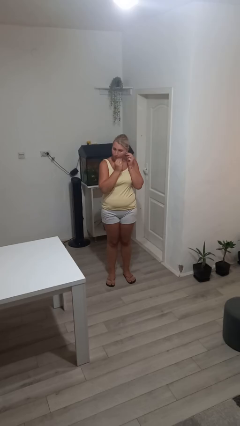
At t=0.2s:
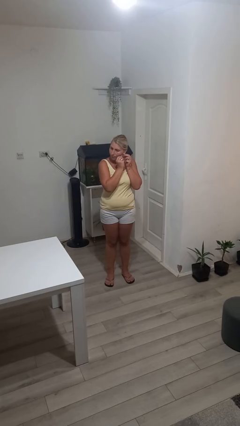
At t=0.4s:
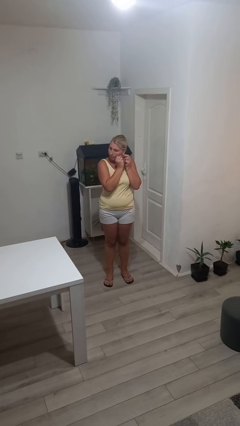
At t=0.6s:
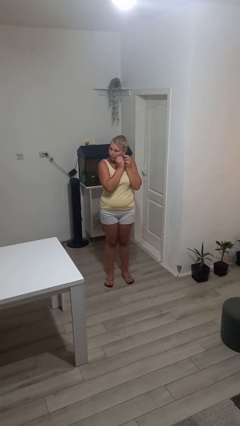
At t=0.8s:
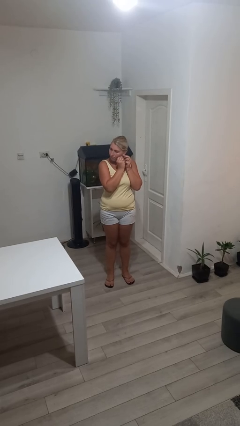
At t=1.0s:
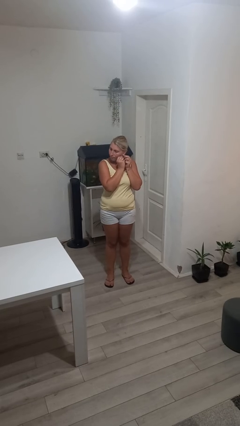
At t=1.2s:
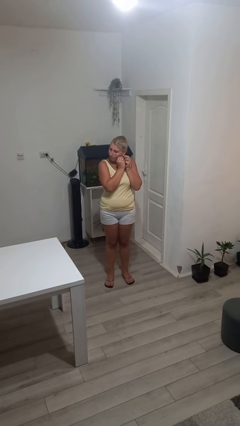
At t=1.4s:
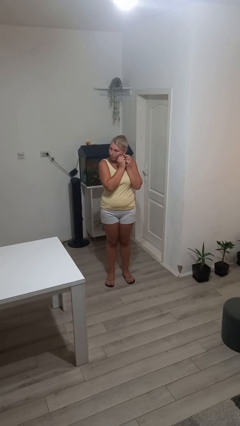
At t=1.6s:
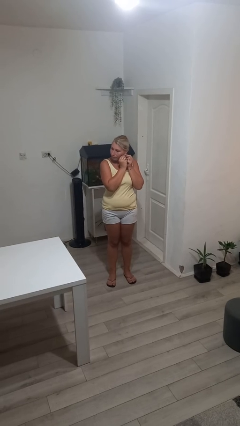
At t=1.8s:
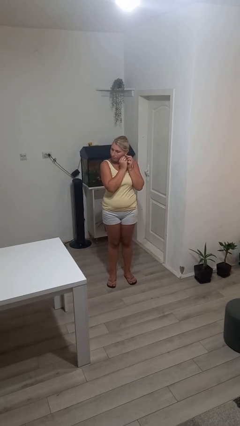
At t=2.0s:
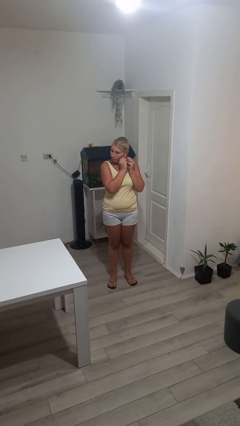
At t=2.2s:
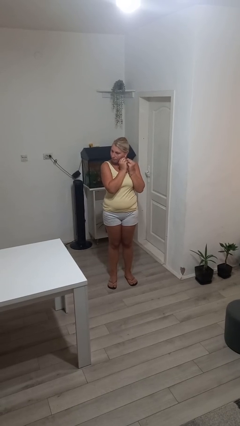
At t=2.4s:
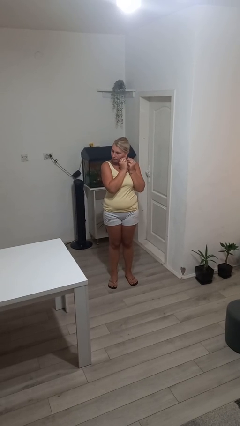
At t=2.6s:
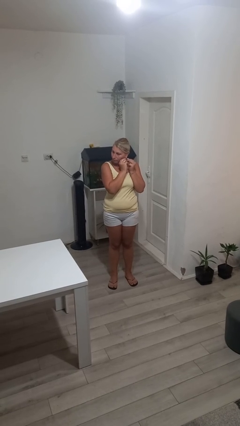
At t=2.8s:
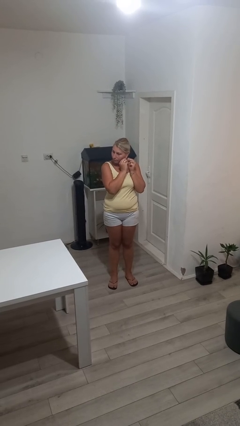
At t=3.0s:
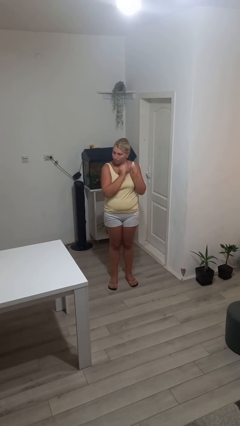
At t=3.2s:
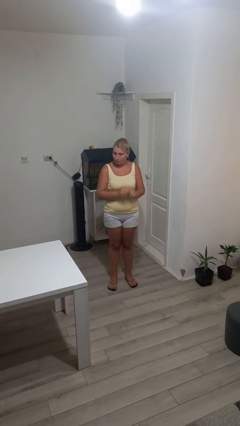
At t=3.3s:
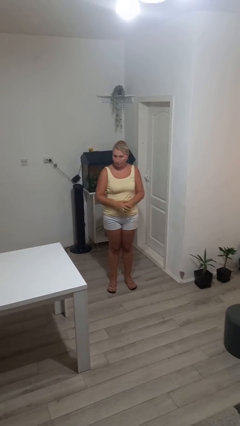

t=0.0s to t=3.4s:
person puts on earrings

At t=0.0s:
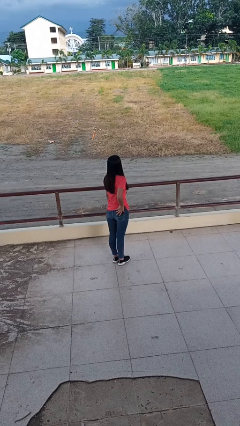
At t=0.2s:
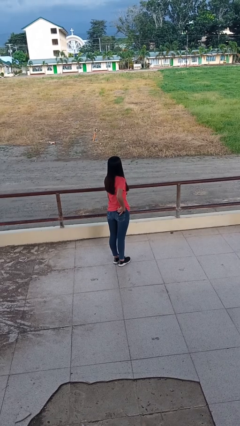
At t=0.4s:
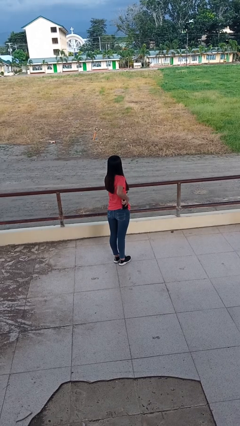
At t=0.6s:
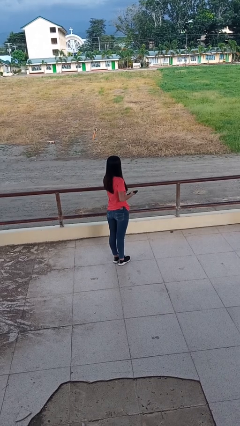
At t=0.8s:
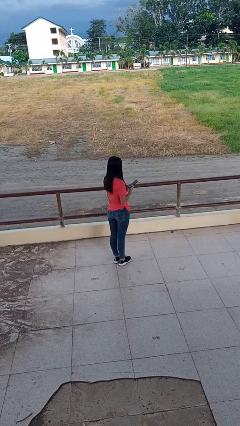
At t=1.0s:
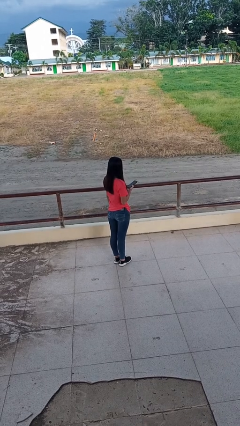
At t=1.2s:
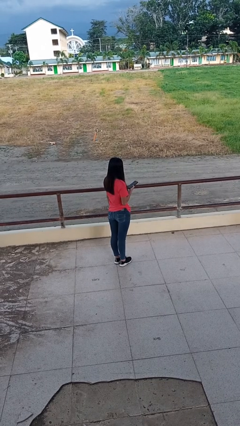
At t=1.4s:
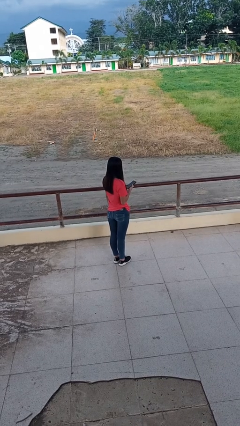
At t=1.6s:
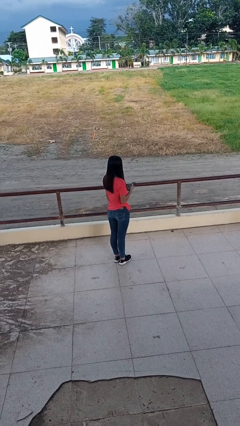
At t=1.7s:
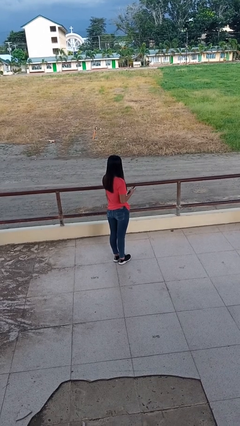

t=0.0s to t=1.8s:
person takes phone from pocket

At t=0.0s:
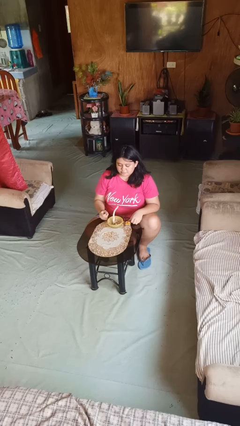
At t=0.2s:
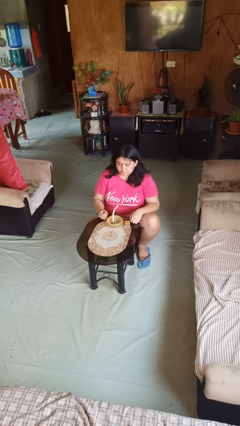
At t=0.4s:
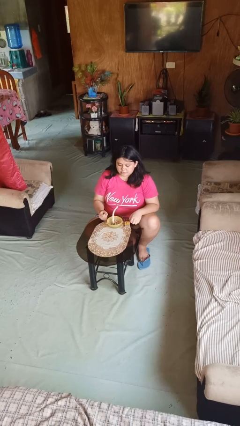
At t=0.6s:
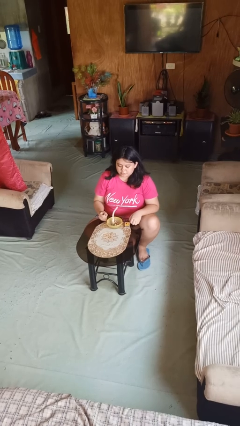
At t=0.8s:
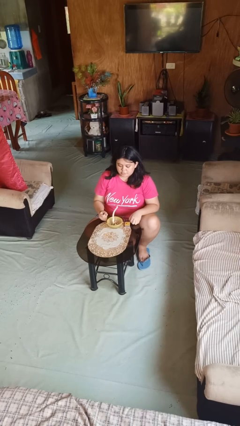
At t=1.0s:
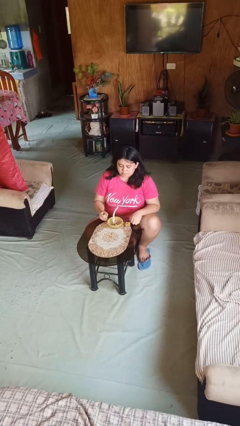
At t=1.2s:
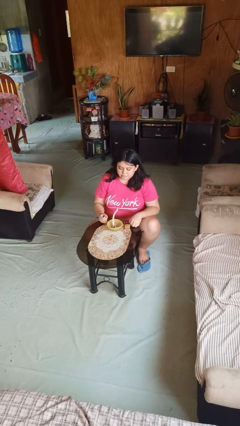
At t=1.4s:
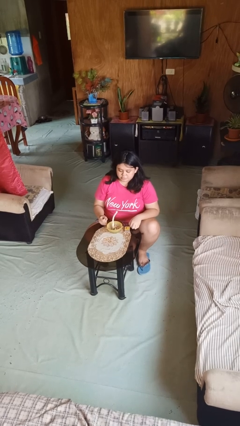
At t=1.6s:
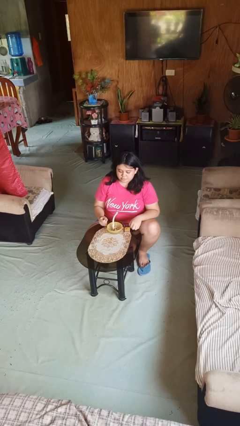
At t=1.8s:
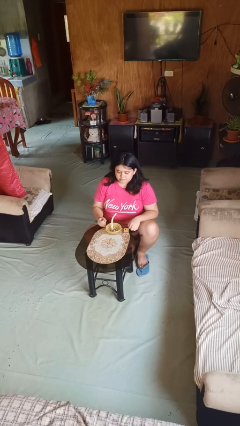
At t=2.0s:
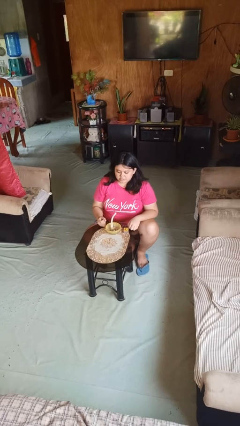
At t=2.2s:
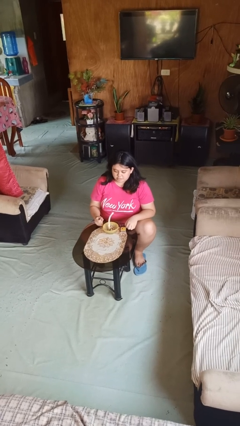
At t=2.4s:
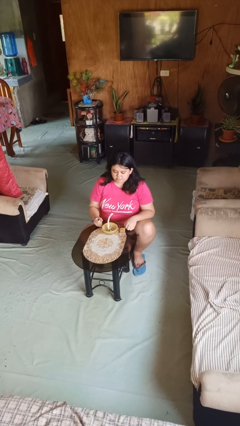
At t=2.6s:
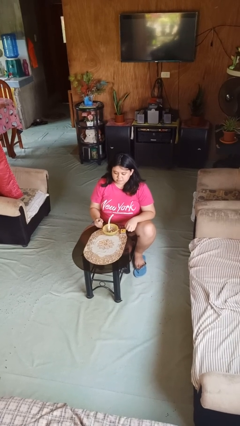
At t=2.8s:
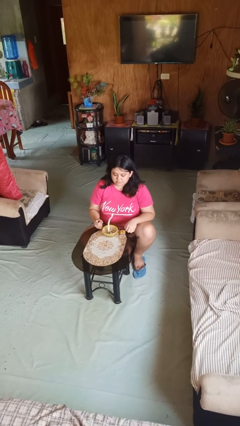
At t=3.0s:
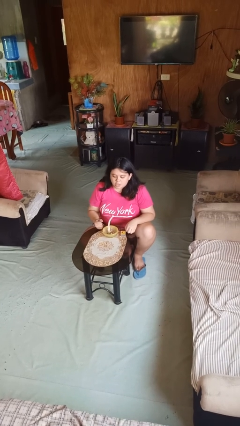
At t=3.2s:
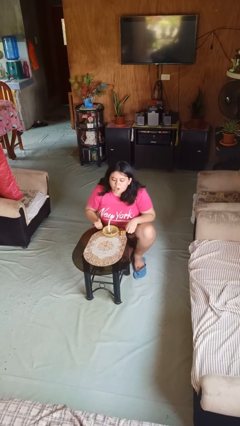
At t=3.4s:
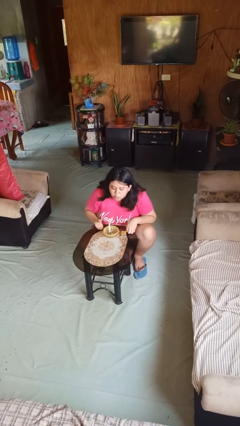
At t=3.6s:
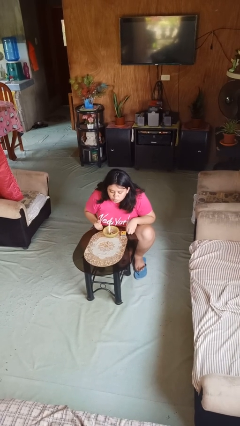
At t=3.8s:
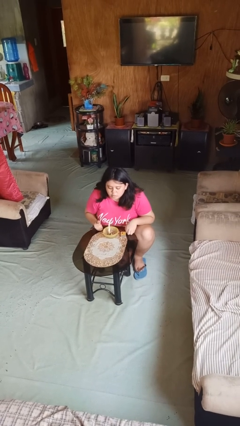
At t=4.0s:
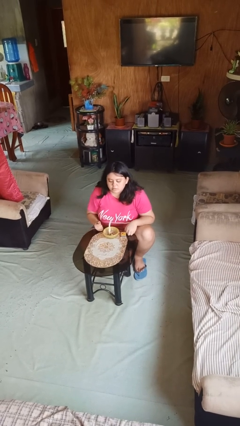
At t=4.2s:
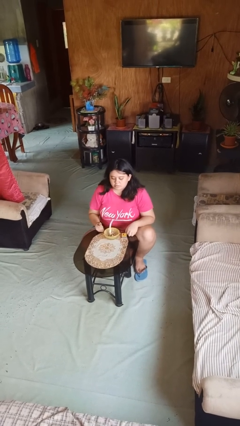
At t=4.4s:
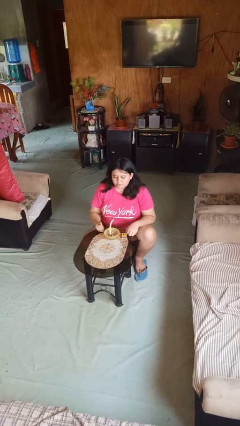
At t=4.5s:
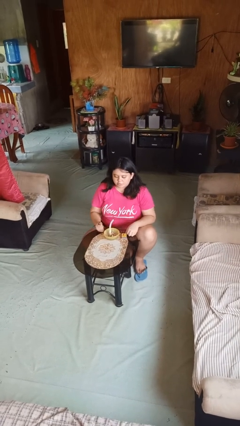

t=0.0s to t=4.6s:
person extinguishes candle

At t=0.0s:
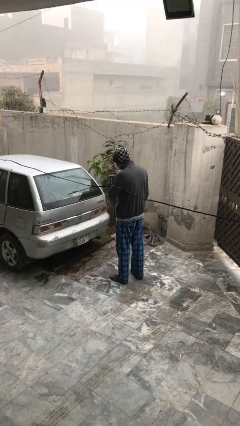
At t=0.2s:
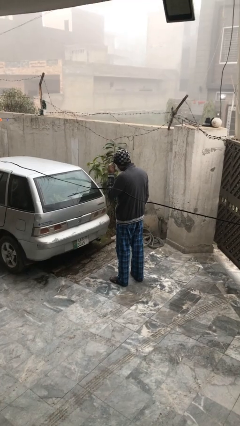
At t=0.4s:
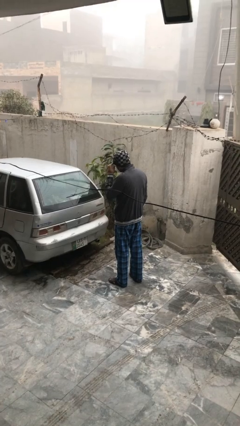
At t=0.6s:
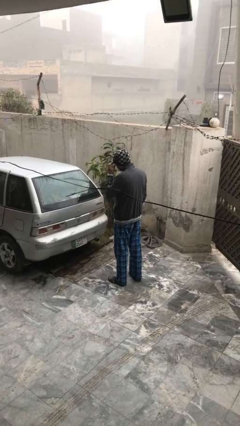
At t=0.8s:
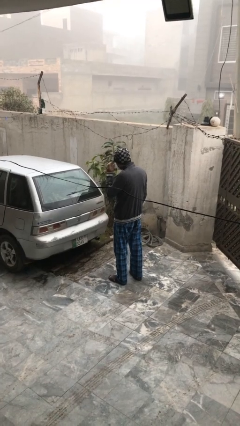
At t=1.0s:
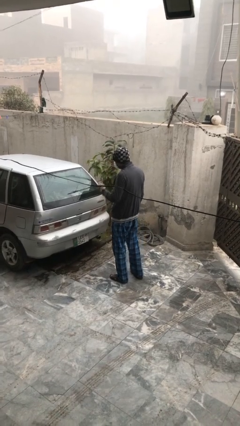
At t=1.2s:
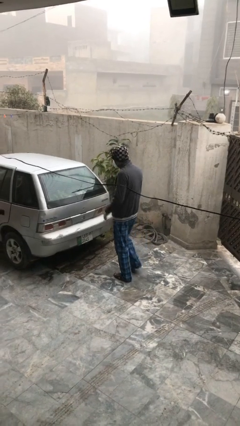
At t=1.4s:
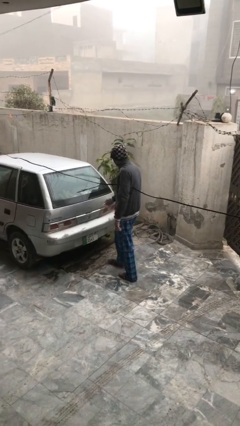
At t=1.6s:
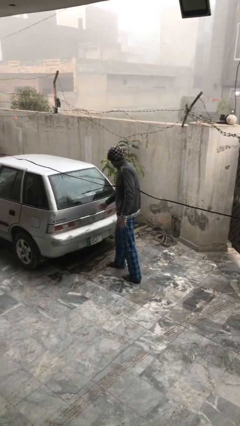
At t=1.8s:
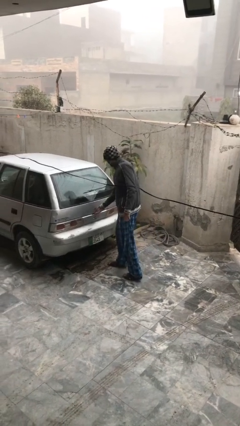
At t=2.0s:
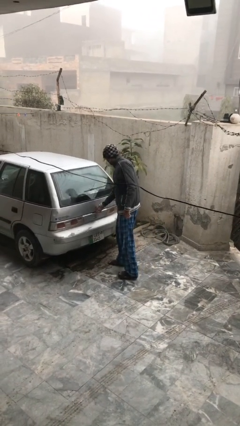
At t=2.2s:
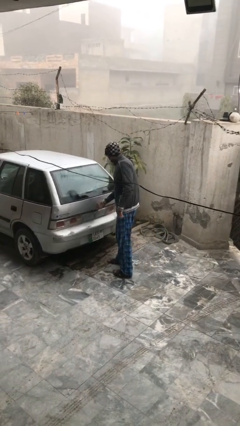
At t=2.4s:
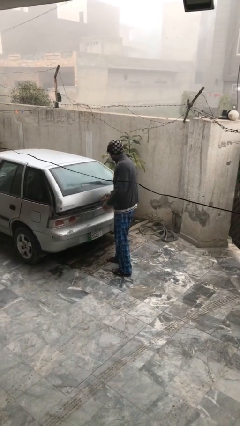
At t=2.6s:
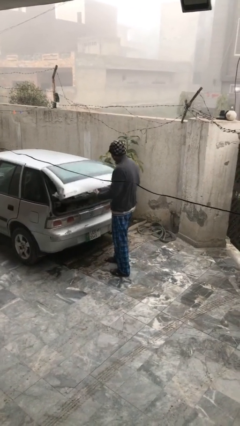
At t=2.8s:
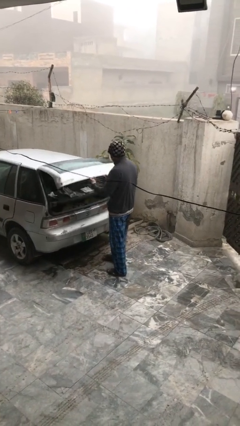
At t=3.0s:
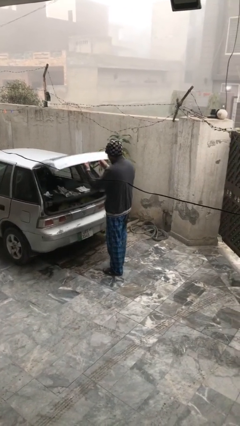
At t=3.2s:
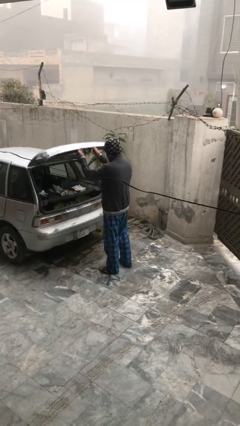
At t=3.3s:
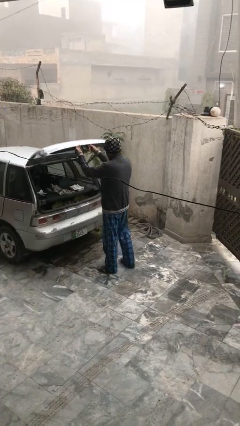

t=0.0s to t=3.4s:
person opens car trunk

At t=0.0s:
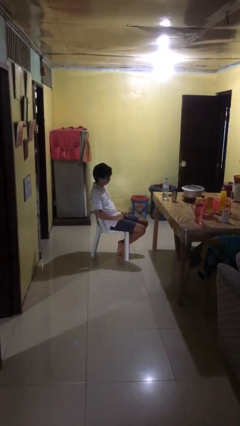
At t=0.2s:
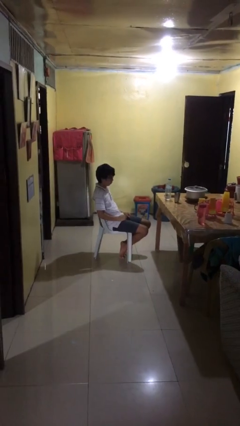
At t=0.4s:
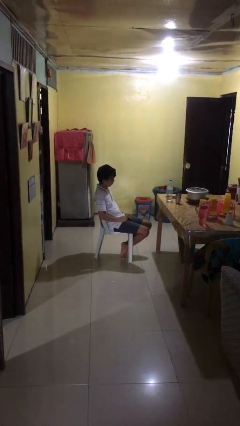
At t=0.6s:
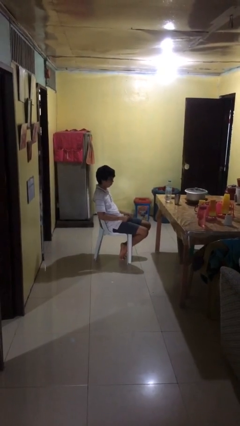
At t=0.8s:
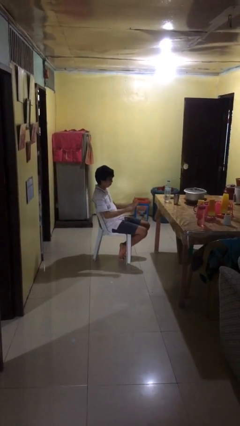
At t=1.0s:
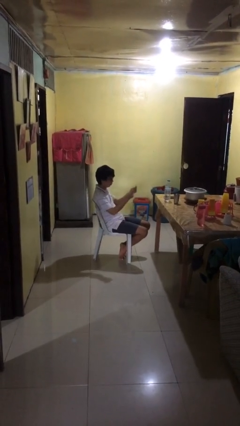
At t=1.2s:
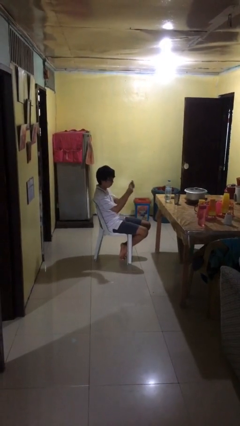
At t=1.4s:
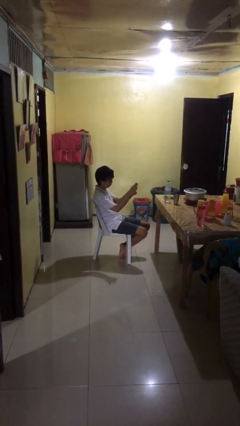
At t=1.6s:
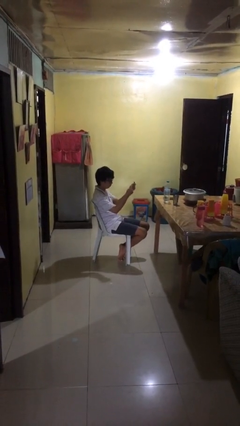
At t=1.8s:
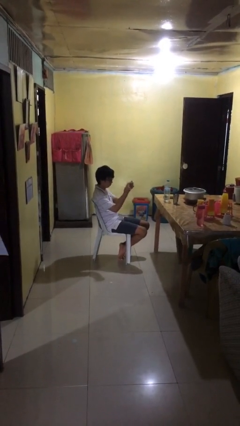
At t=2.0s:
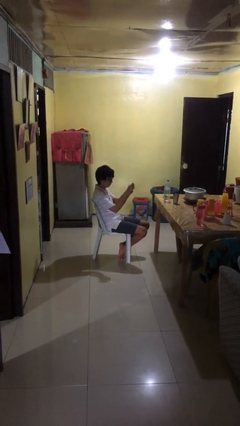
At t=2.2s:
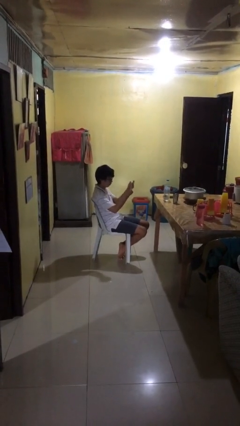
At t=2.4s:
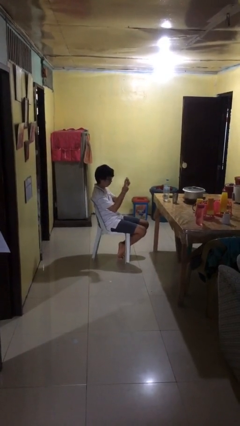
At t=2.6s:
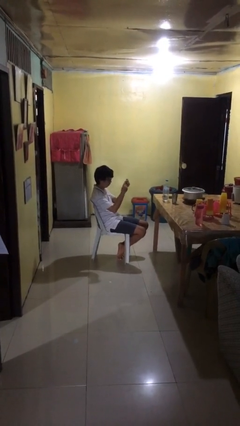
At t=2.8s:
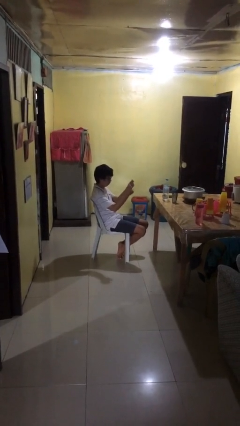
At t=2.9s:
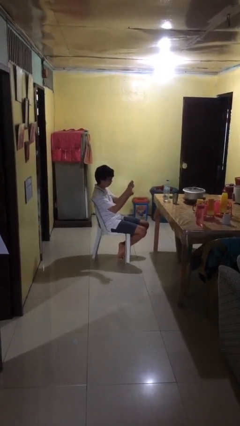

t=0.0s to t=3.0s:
person snaps fingers

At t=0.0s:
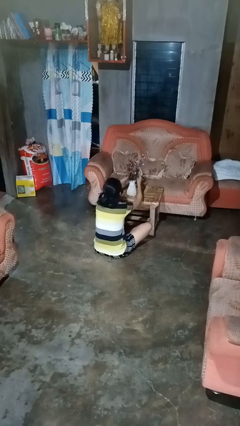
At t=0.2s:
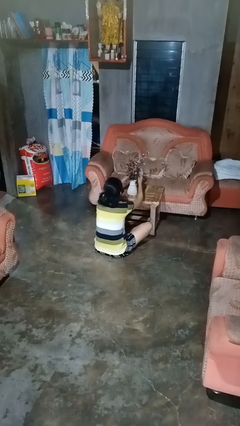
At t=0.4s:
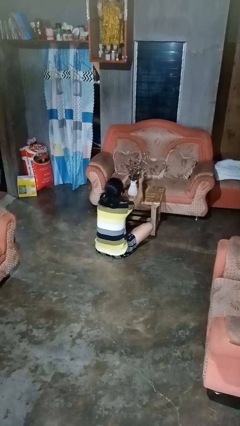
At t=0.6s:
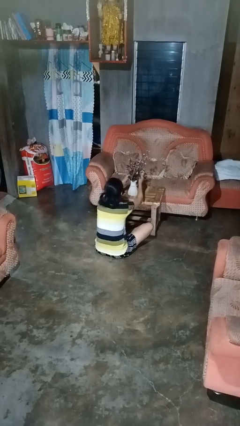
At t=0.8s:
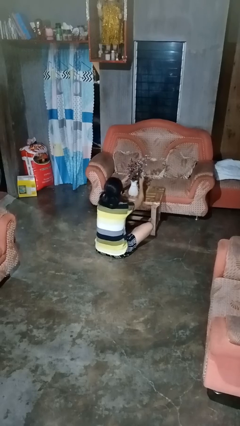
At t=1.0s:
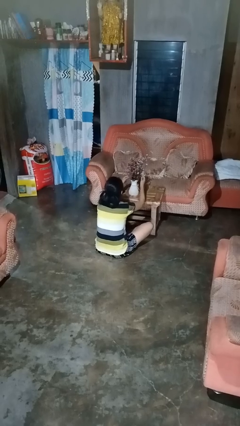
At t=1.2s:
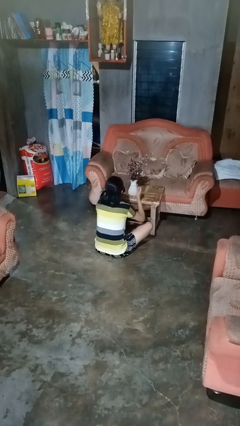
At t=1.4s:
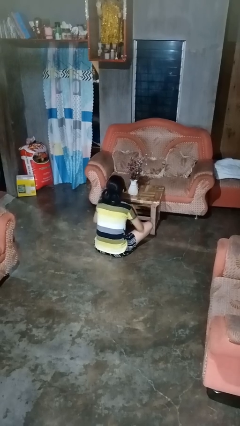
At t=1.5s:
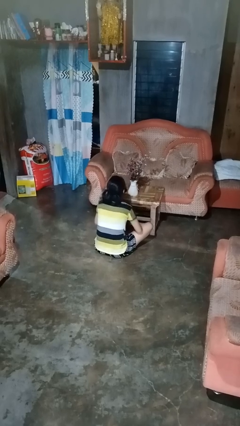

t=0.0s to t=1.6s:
person arranges flowers in vase
